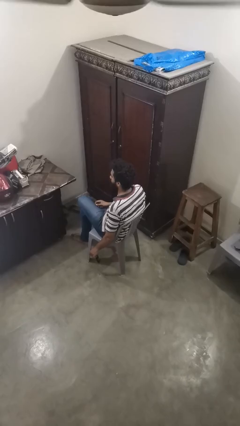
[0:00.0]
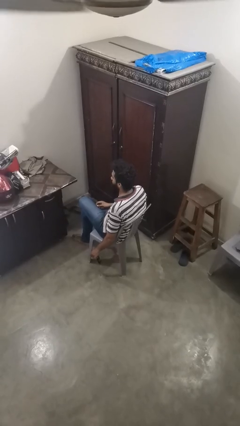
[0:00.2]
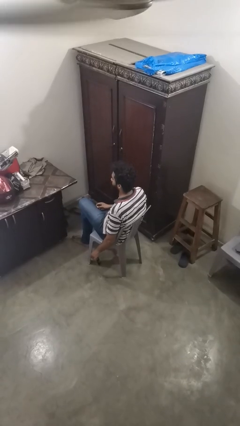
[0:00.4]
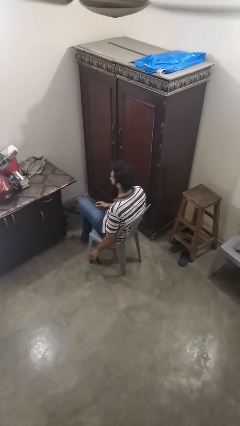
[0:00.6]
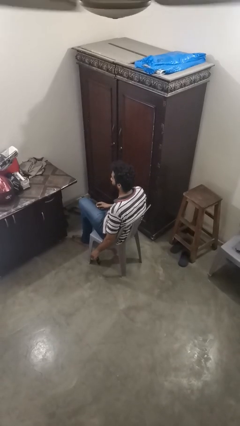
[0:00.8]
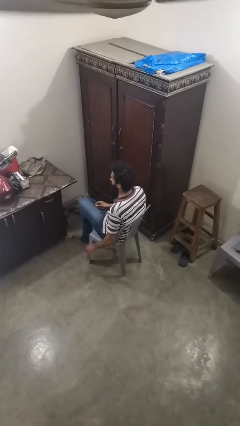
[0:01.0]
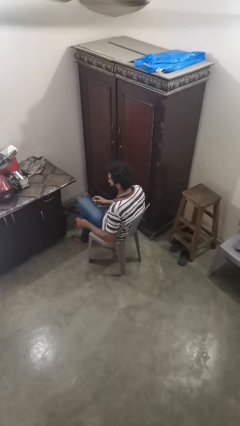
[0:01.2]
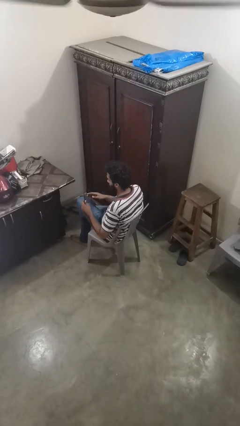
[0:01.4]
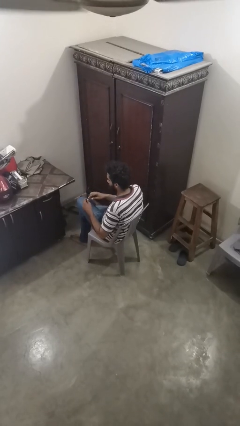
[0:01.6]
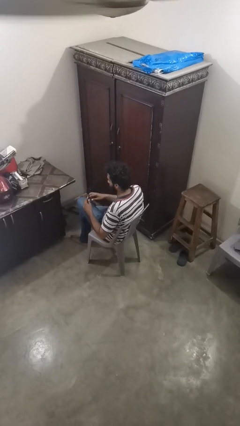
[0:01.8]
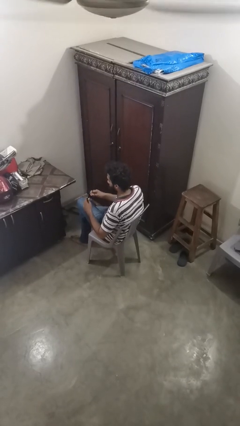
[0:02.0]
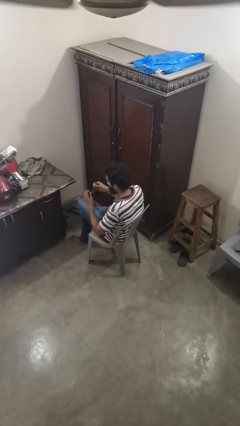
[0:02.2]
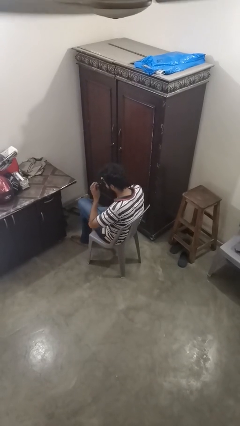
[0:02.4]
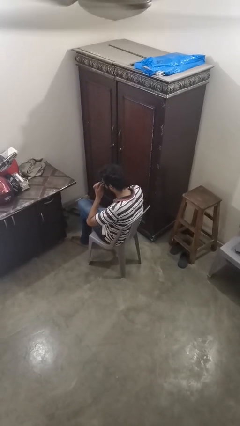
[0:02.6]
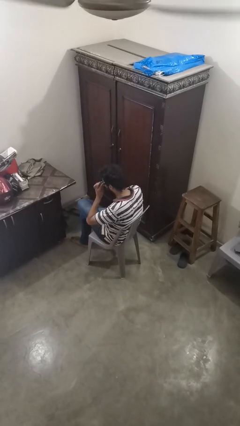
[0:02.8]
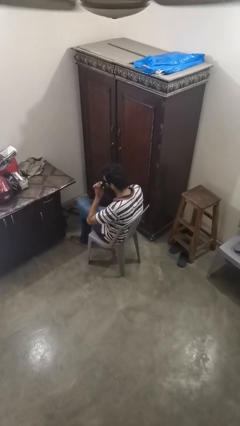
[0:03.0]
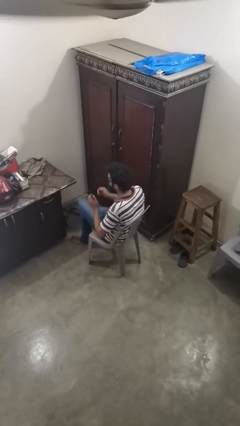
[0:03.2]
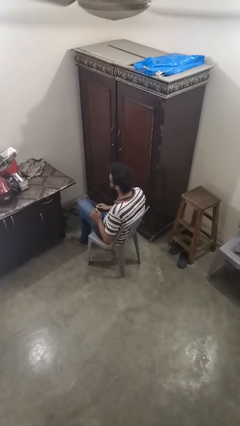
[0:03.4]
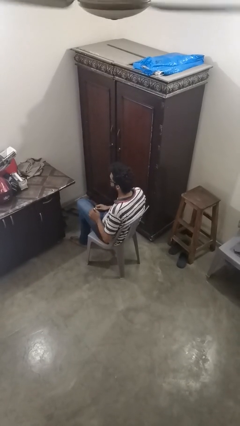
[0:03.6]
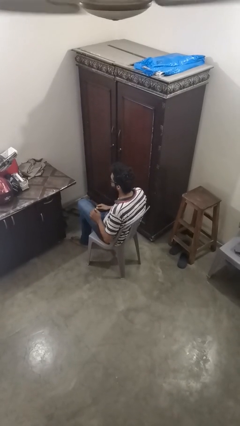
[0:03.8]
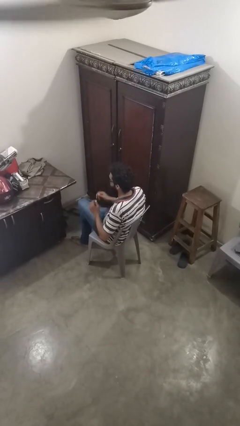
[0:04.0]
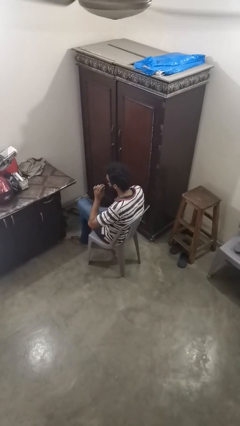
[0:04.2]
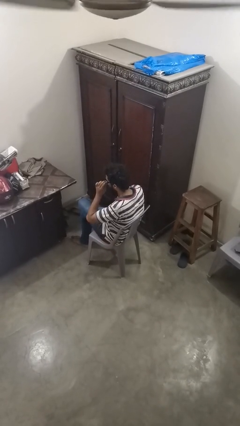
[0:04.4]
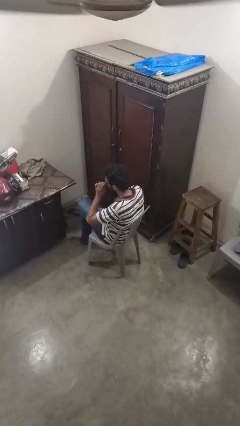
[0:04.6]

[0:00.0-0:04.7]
person puts on sunglasses

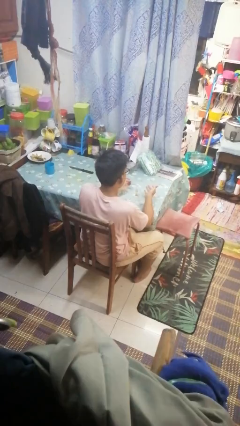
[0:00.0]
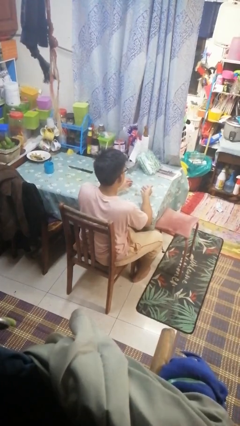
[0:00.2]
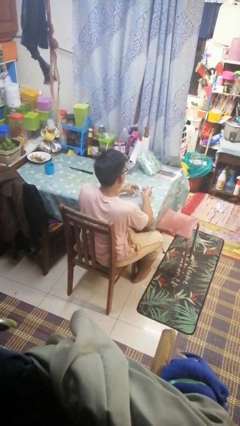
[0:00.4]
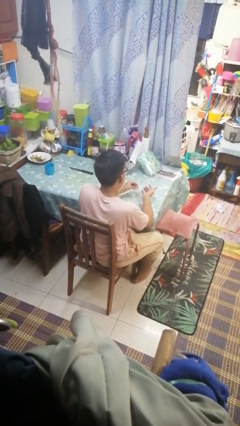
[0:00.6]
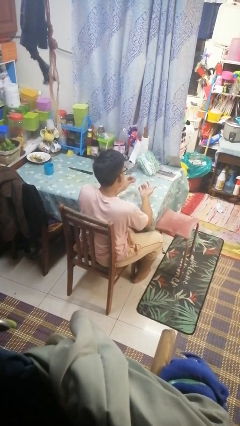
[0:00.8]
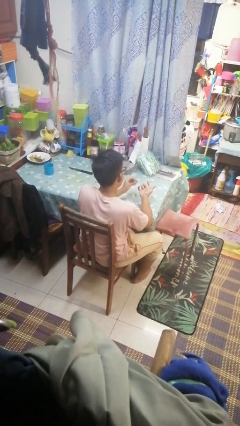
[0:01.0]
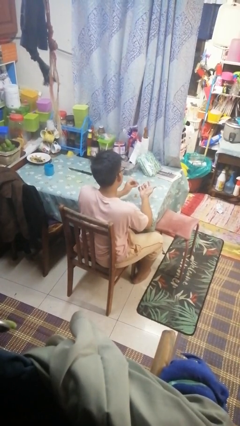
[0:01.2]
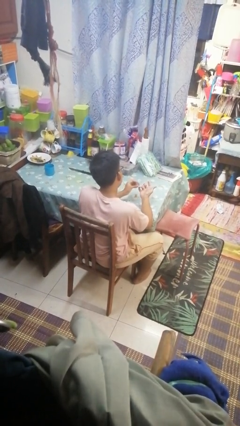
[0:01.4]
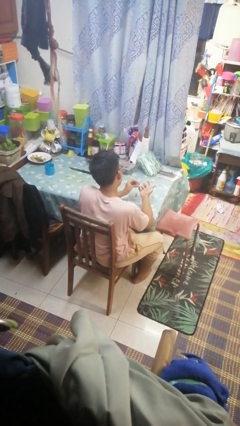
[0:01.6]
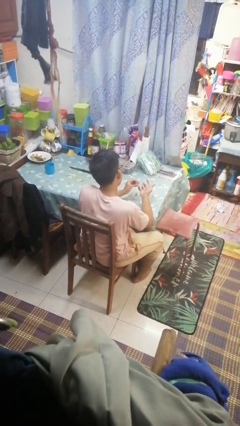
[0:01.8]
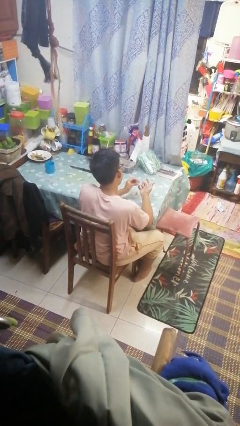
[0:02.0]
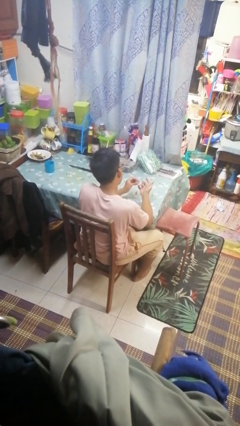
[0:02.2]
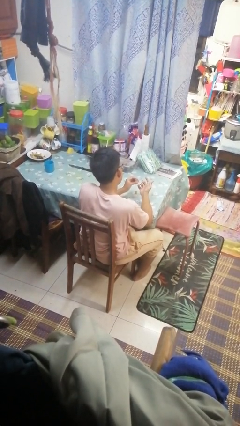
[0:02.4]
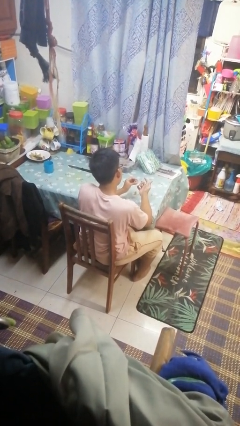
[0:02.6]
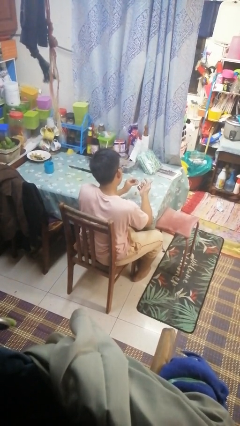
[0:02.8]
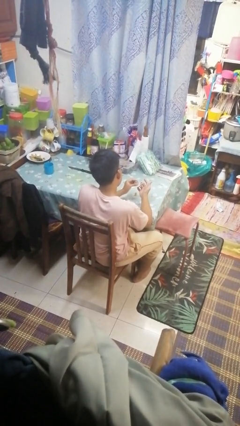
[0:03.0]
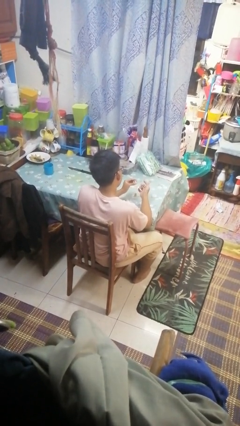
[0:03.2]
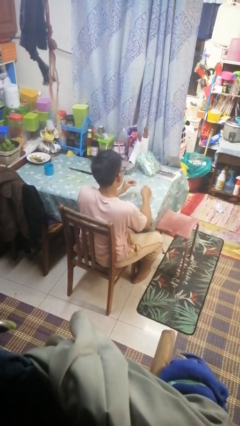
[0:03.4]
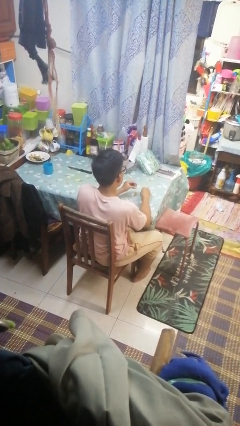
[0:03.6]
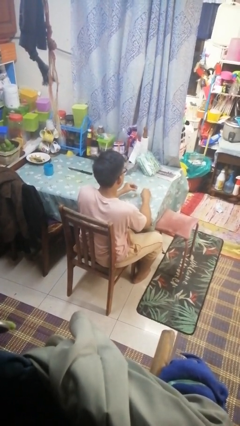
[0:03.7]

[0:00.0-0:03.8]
person paints fingernails

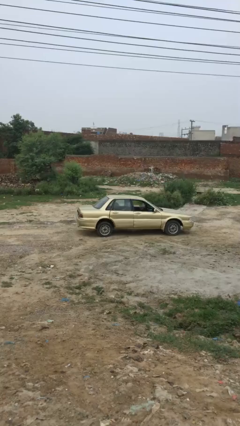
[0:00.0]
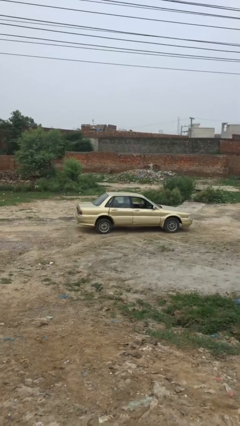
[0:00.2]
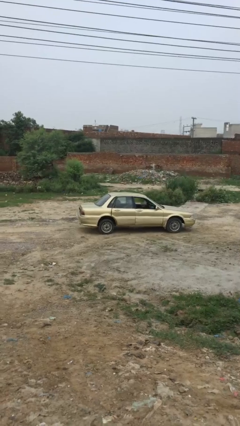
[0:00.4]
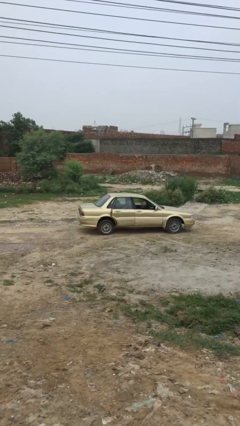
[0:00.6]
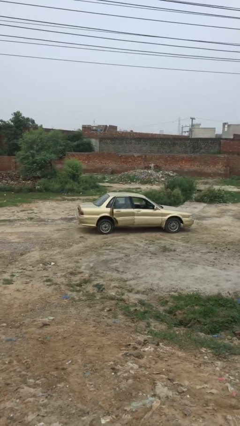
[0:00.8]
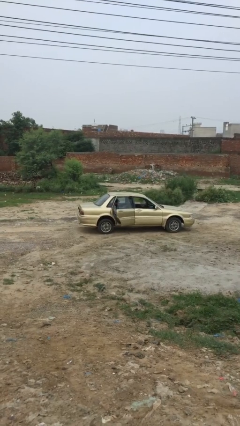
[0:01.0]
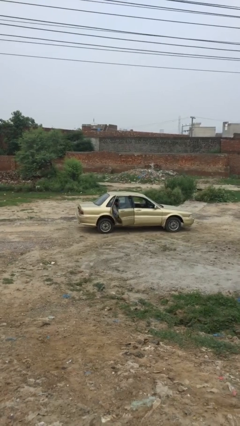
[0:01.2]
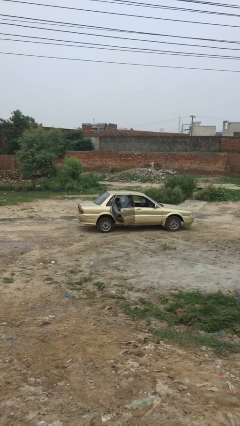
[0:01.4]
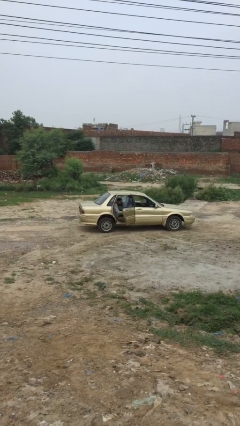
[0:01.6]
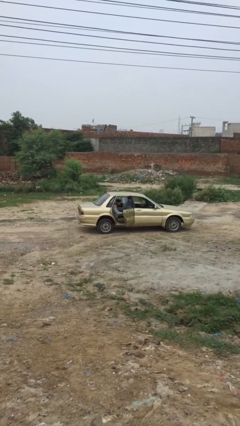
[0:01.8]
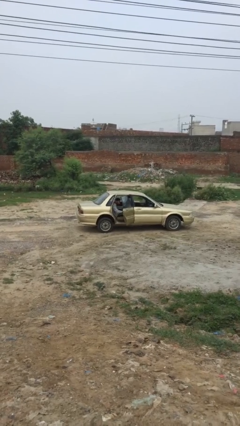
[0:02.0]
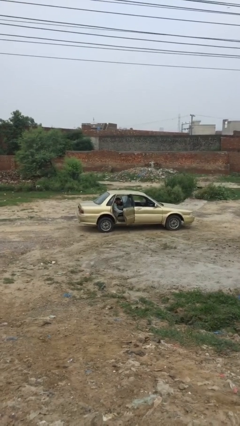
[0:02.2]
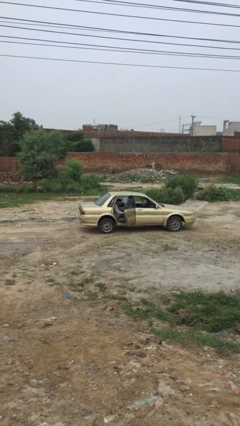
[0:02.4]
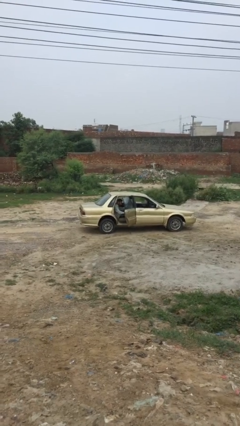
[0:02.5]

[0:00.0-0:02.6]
person opens car door

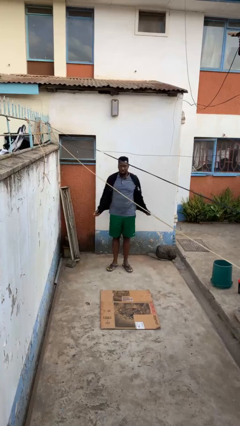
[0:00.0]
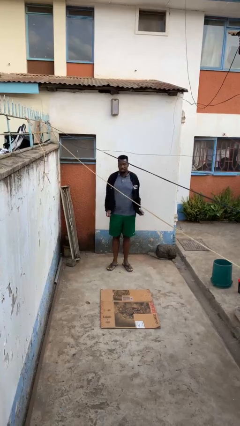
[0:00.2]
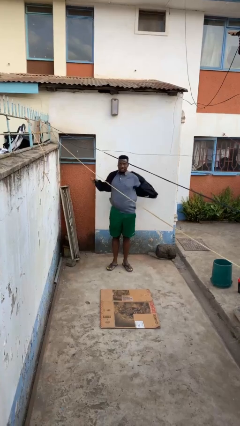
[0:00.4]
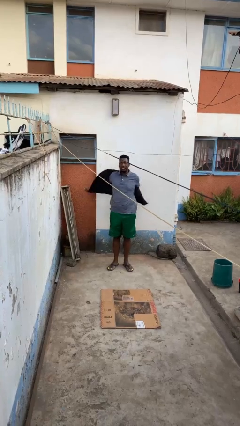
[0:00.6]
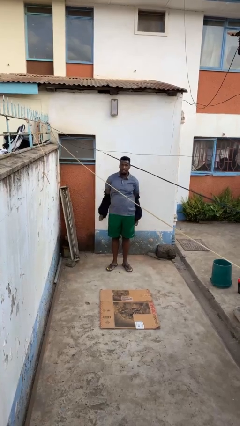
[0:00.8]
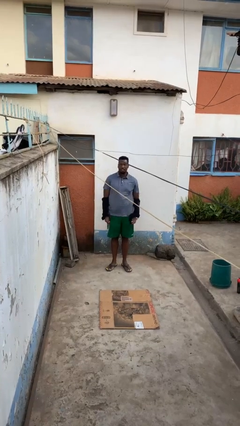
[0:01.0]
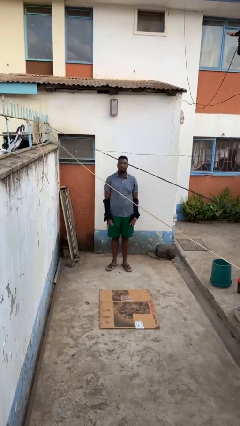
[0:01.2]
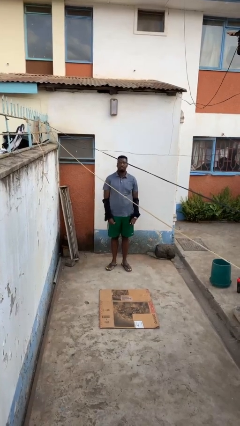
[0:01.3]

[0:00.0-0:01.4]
person takes off jacket

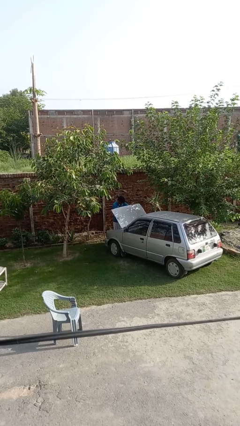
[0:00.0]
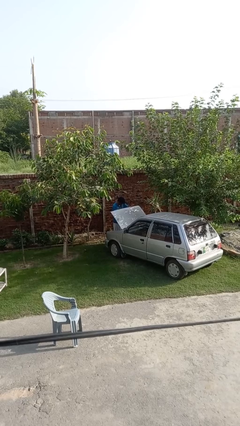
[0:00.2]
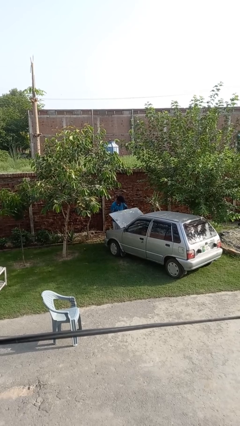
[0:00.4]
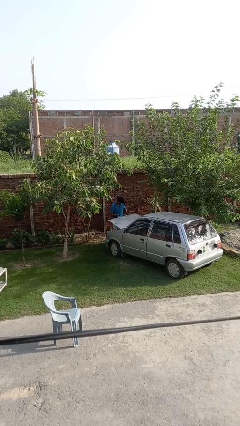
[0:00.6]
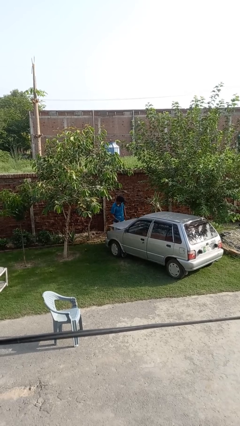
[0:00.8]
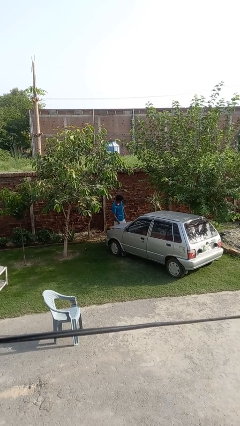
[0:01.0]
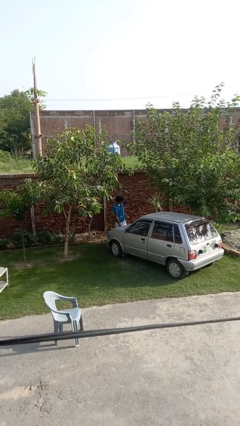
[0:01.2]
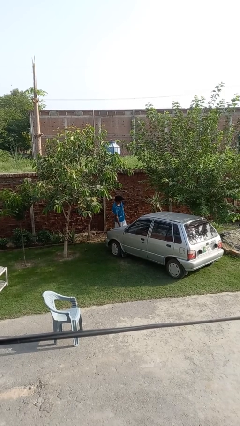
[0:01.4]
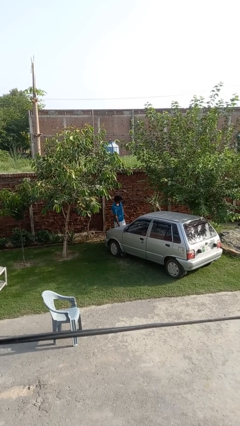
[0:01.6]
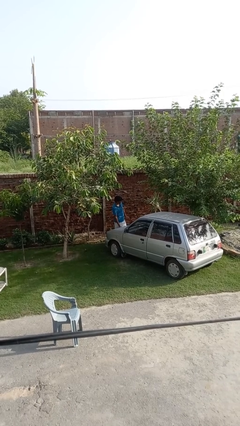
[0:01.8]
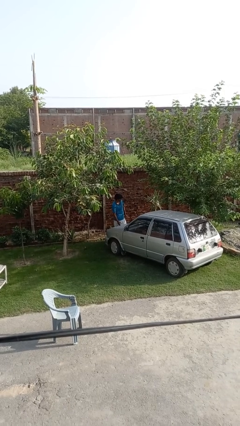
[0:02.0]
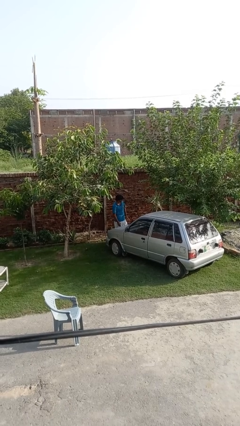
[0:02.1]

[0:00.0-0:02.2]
person closes car hood

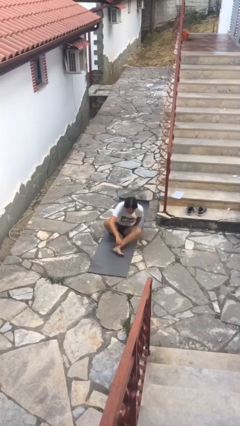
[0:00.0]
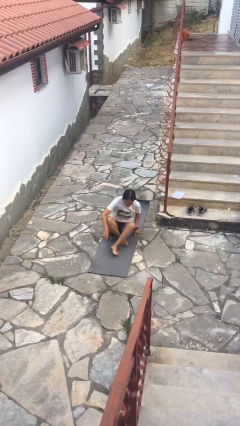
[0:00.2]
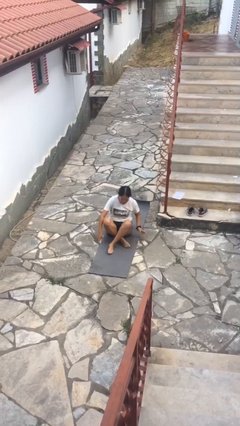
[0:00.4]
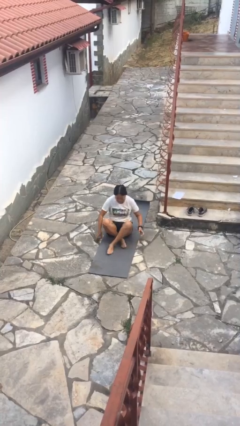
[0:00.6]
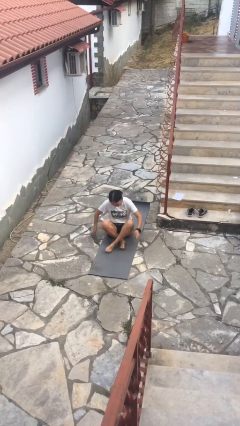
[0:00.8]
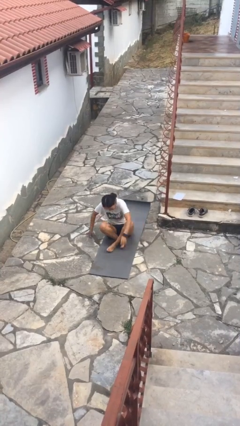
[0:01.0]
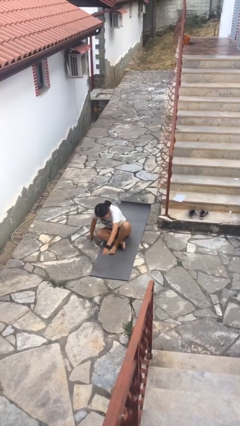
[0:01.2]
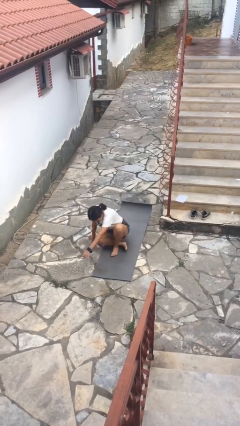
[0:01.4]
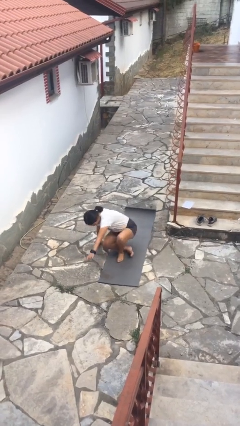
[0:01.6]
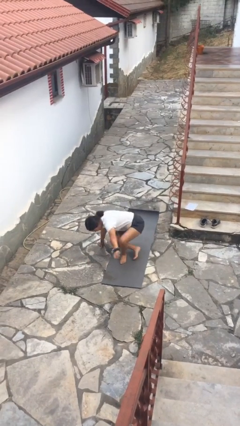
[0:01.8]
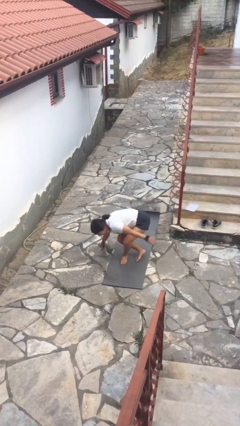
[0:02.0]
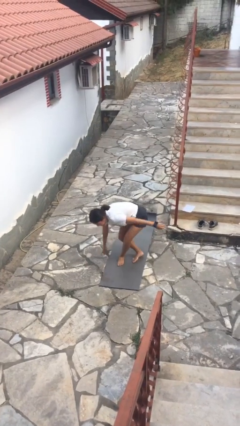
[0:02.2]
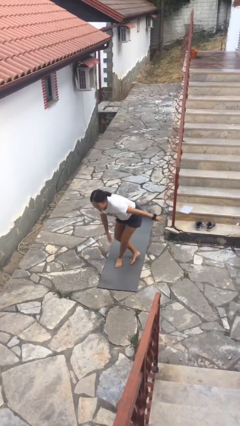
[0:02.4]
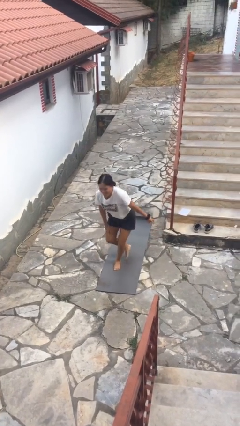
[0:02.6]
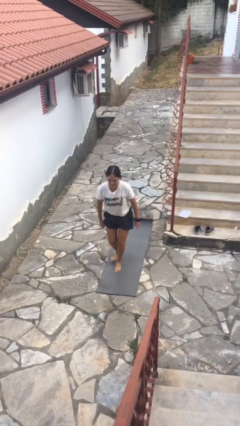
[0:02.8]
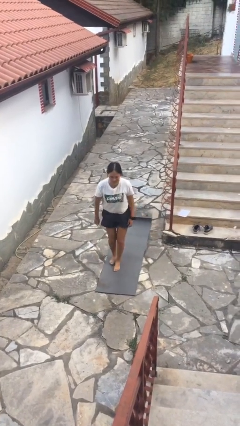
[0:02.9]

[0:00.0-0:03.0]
person stands up from floor
